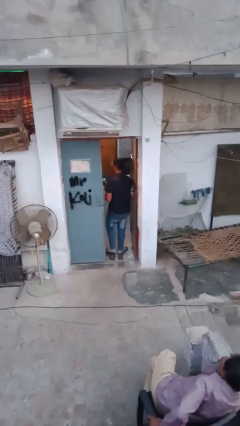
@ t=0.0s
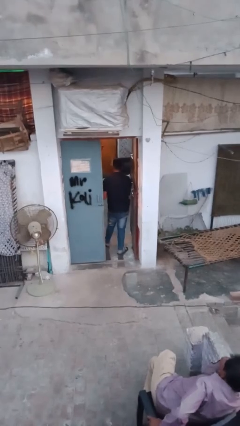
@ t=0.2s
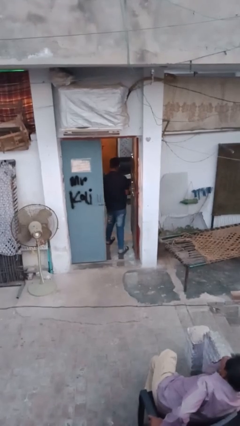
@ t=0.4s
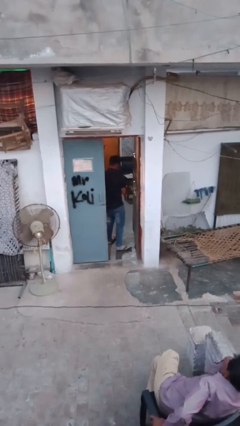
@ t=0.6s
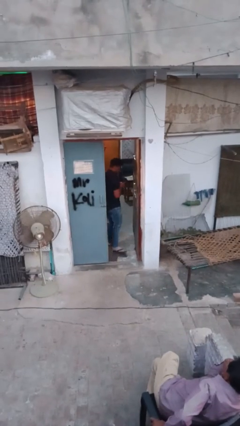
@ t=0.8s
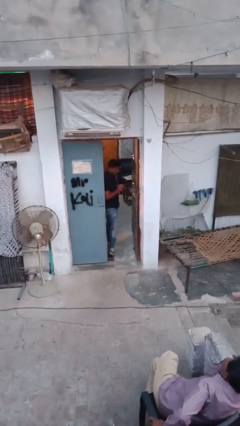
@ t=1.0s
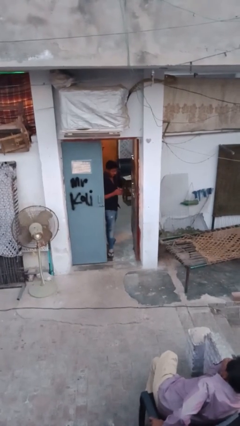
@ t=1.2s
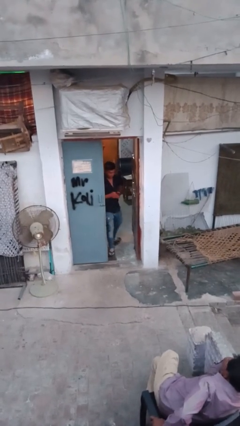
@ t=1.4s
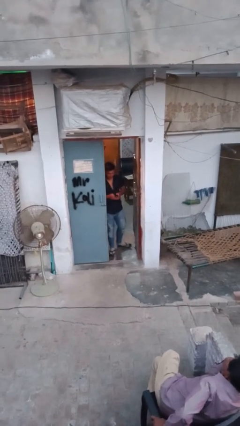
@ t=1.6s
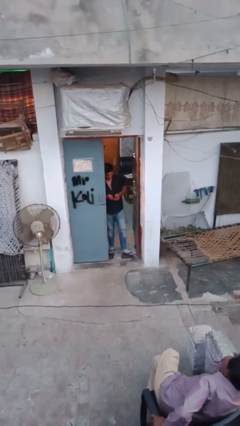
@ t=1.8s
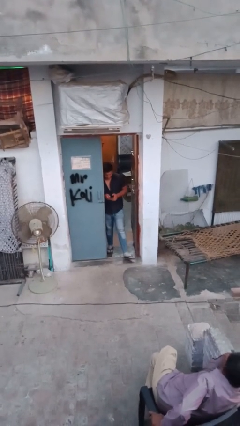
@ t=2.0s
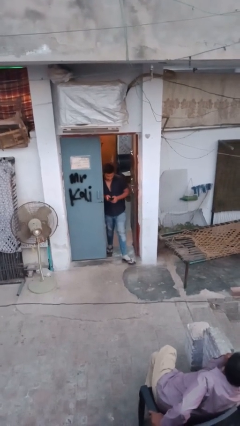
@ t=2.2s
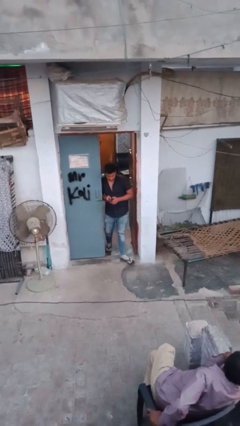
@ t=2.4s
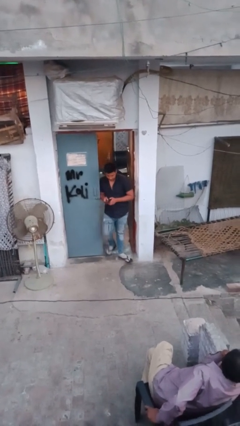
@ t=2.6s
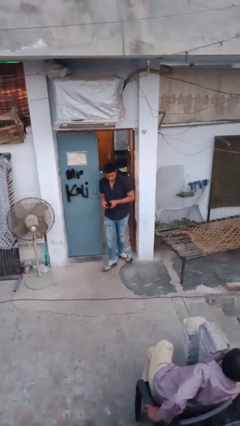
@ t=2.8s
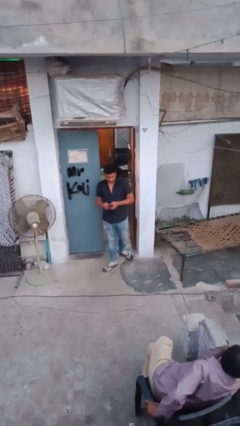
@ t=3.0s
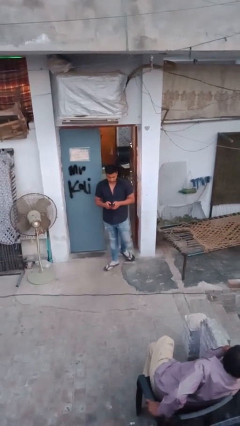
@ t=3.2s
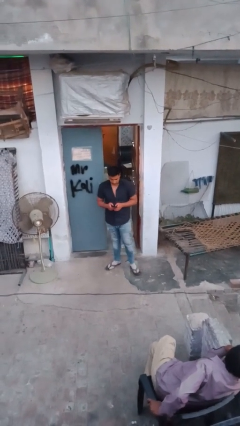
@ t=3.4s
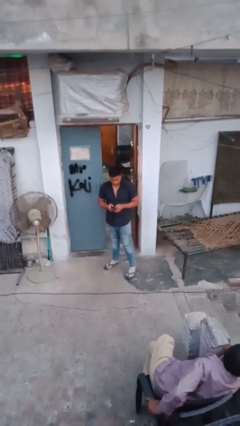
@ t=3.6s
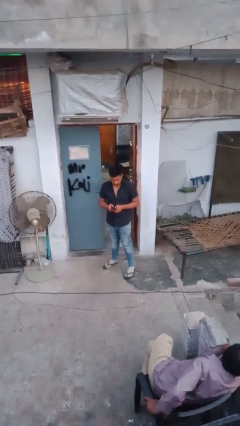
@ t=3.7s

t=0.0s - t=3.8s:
person enters scene through structure

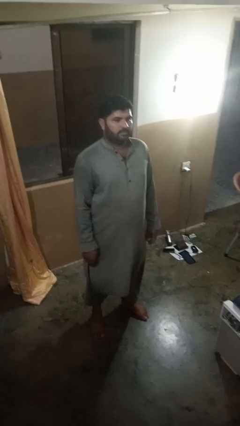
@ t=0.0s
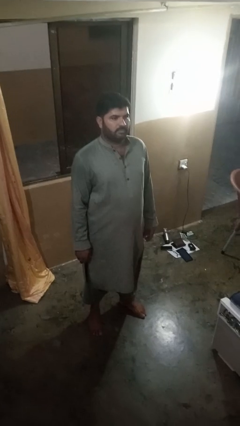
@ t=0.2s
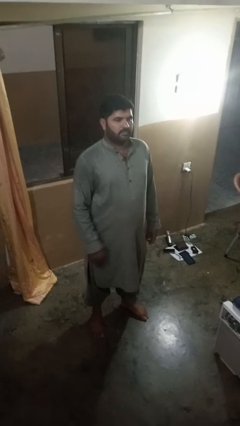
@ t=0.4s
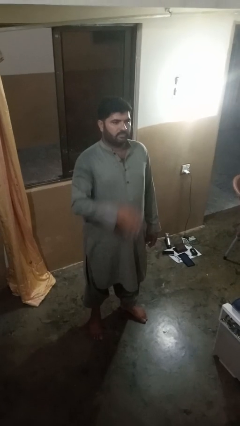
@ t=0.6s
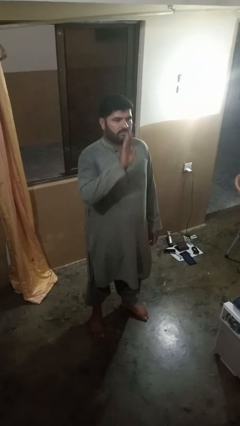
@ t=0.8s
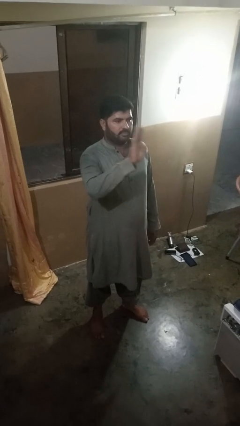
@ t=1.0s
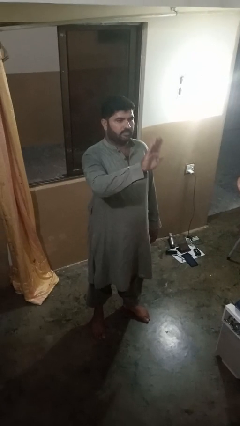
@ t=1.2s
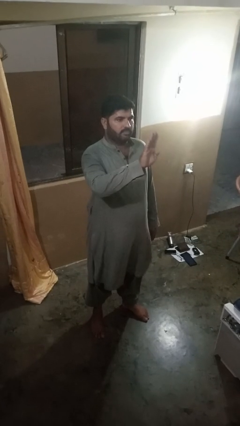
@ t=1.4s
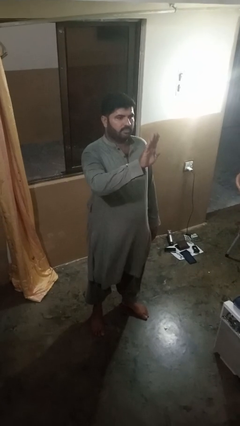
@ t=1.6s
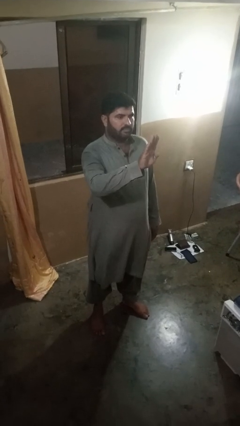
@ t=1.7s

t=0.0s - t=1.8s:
person gestures stop

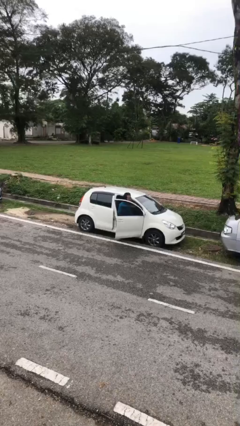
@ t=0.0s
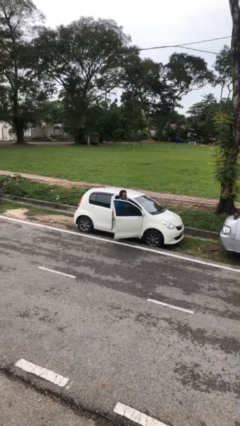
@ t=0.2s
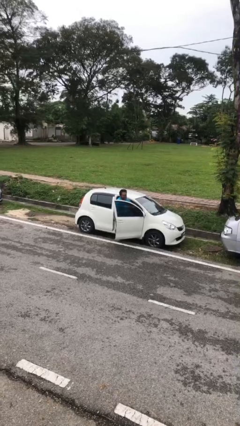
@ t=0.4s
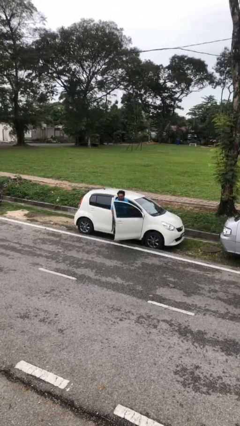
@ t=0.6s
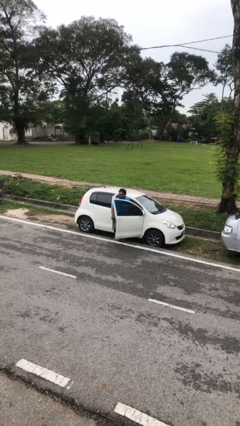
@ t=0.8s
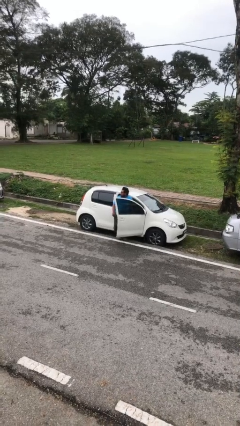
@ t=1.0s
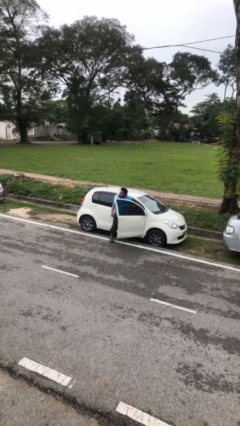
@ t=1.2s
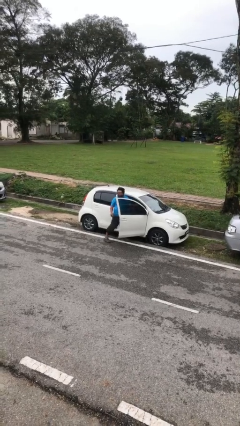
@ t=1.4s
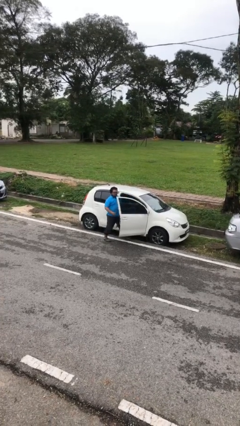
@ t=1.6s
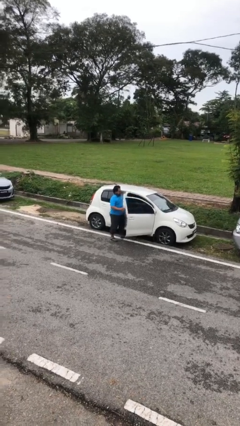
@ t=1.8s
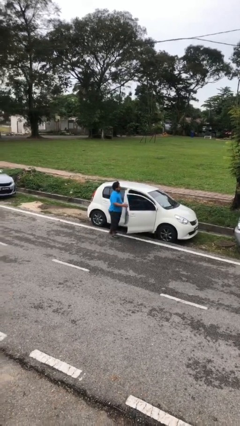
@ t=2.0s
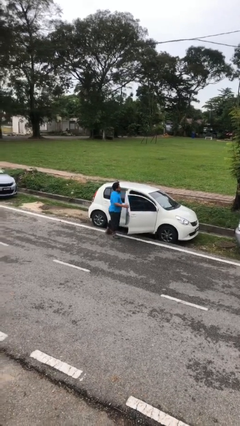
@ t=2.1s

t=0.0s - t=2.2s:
person exits car

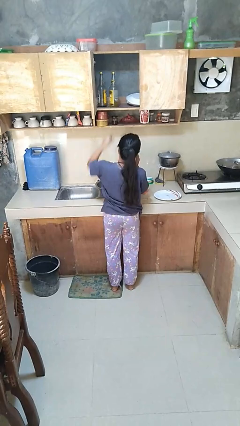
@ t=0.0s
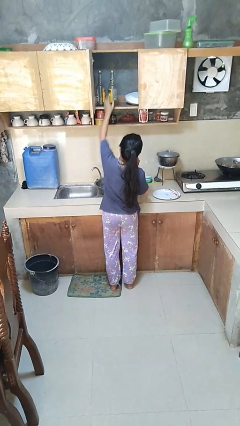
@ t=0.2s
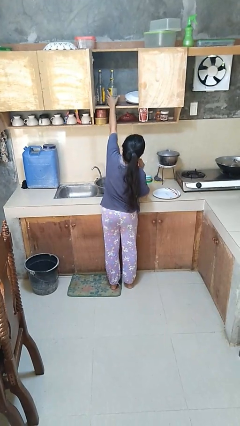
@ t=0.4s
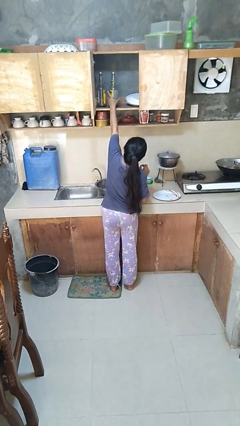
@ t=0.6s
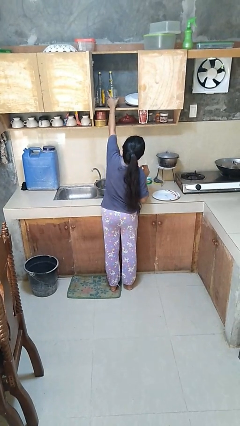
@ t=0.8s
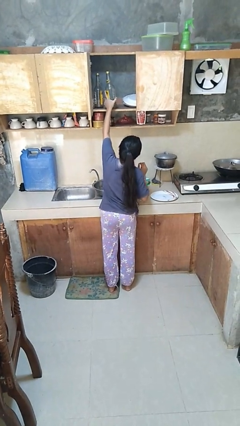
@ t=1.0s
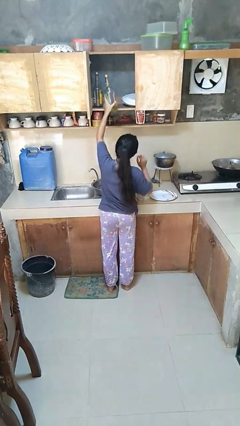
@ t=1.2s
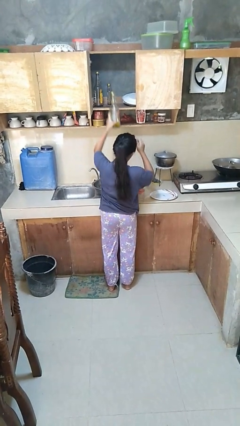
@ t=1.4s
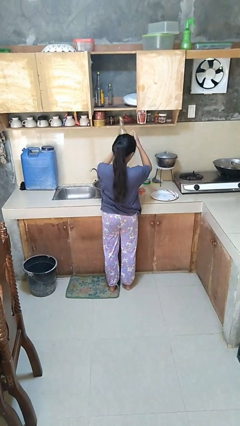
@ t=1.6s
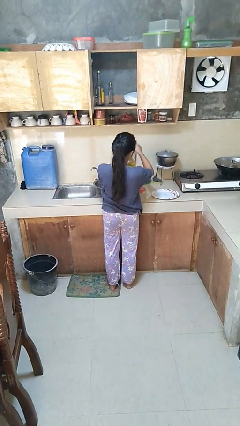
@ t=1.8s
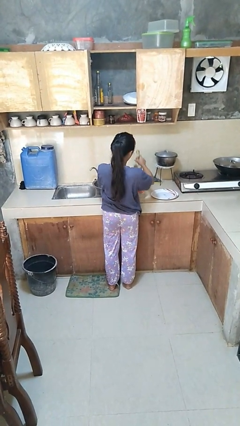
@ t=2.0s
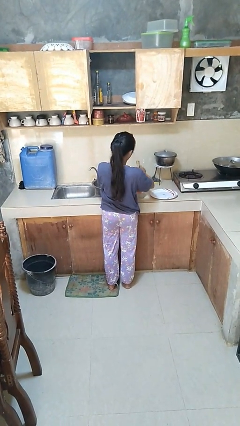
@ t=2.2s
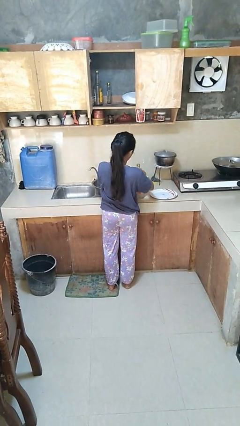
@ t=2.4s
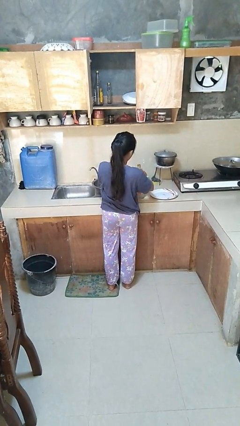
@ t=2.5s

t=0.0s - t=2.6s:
person takes object from cabinet

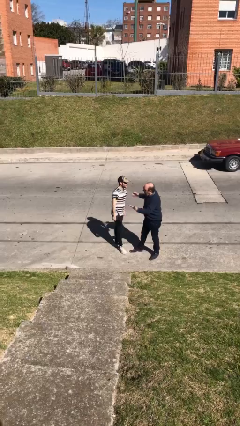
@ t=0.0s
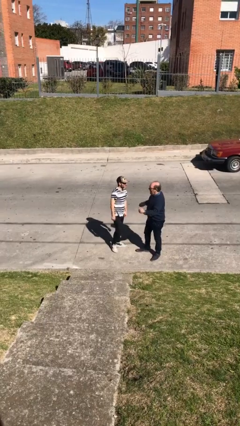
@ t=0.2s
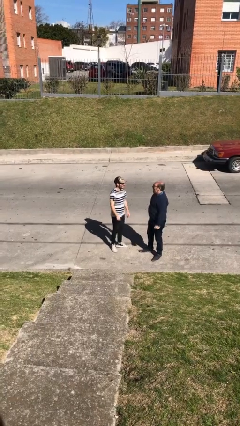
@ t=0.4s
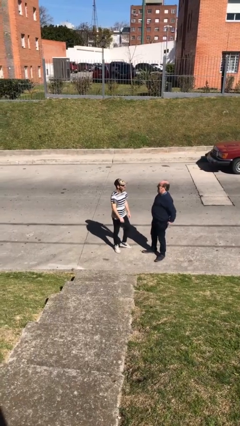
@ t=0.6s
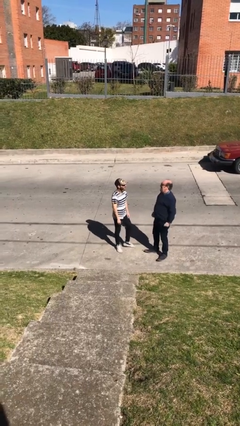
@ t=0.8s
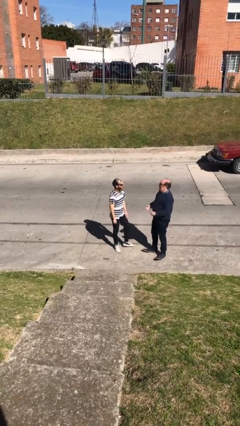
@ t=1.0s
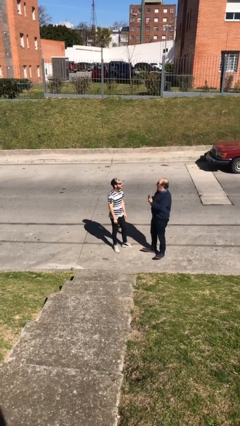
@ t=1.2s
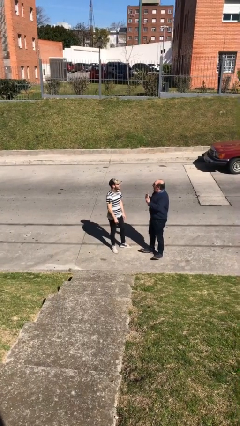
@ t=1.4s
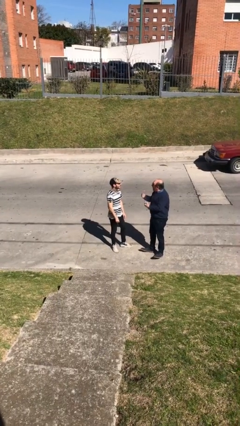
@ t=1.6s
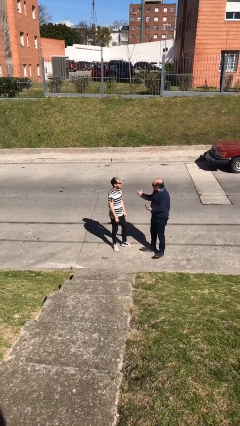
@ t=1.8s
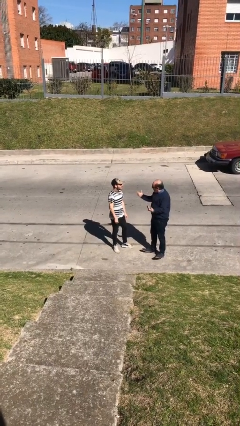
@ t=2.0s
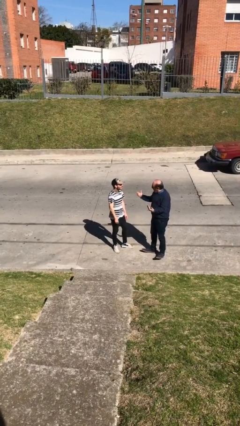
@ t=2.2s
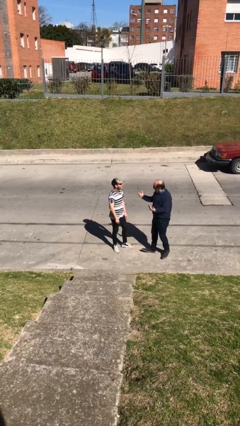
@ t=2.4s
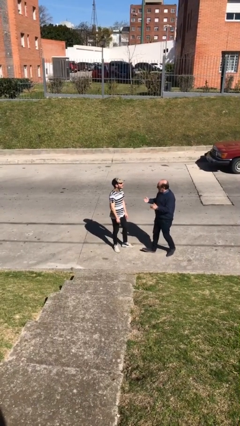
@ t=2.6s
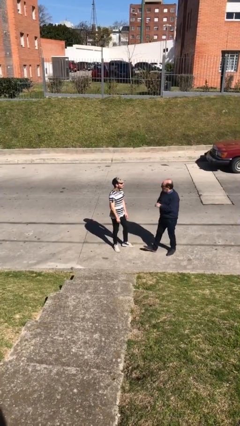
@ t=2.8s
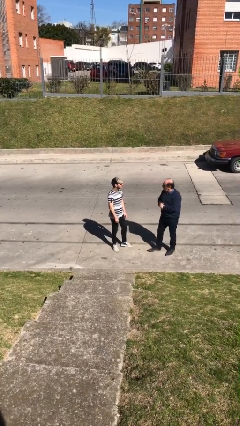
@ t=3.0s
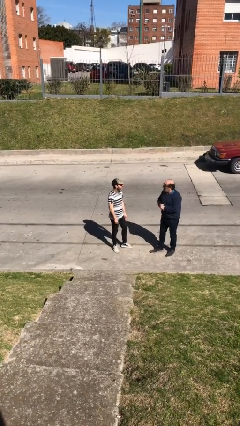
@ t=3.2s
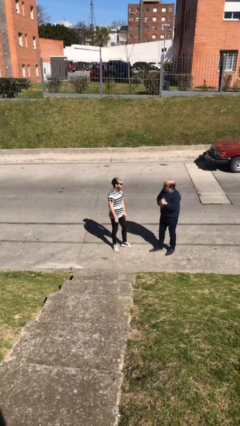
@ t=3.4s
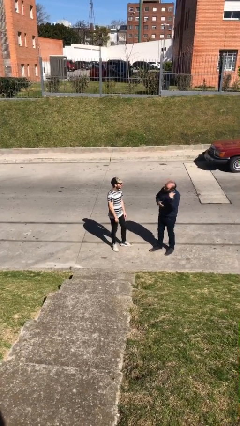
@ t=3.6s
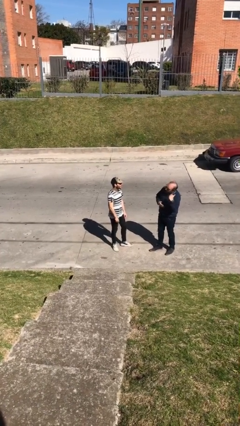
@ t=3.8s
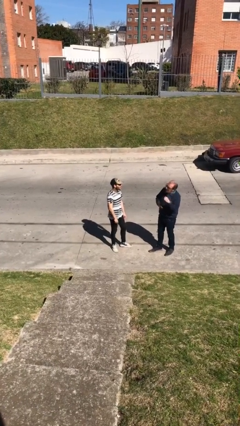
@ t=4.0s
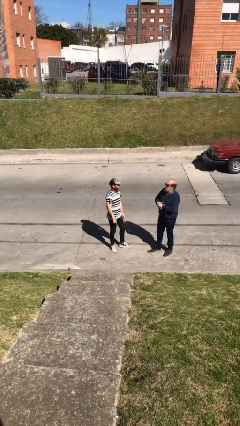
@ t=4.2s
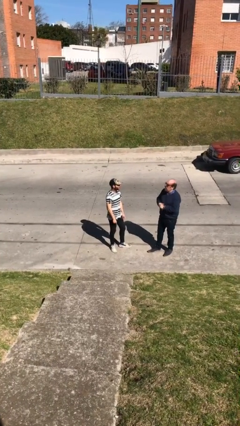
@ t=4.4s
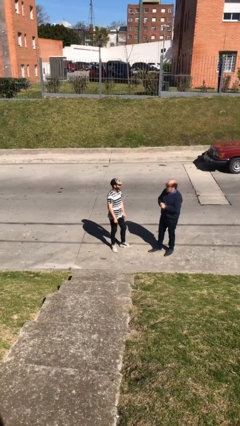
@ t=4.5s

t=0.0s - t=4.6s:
person talks to person

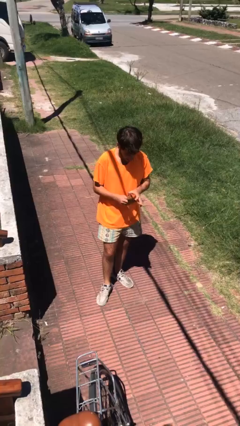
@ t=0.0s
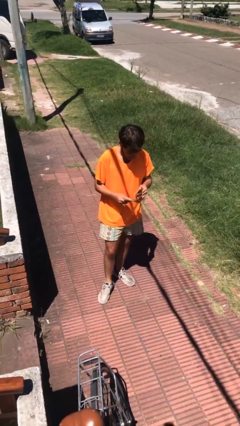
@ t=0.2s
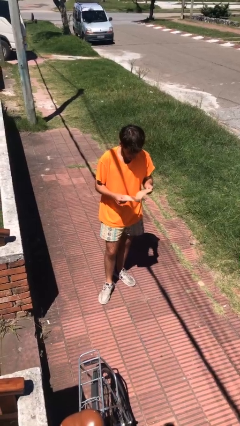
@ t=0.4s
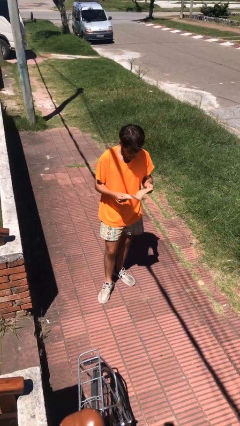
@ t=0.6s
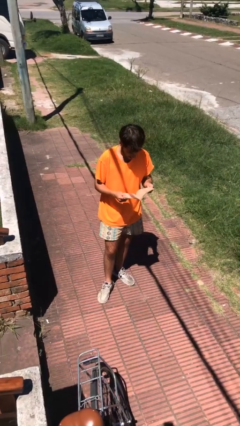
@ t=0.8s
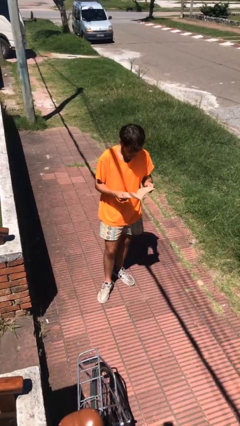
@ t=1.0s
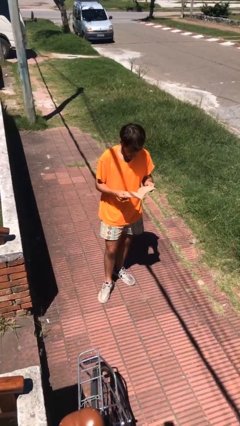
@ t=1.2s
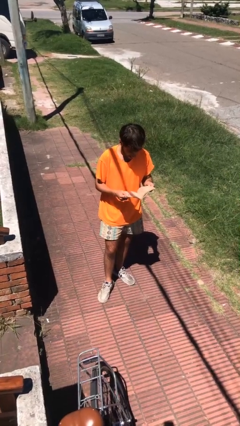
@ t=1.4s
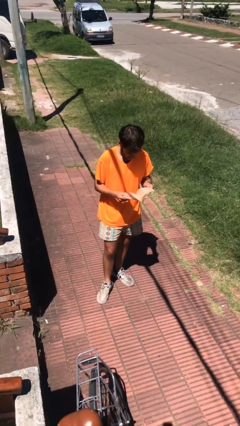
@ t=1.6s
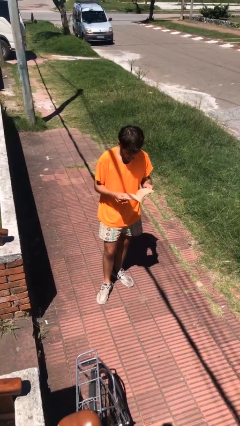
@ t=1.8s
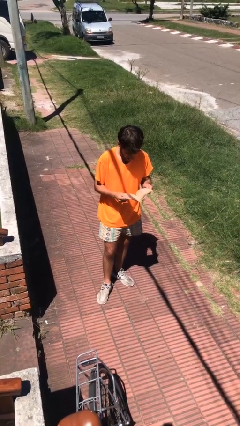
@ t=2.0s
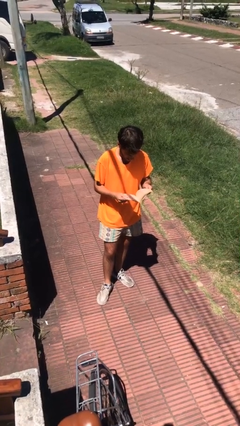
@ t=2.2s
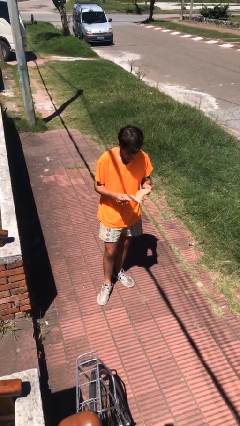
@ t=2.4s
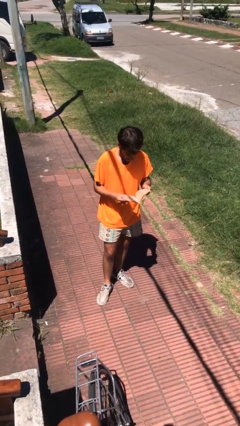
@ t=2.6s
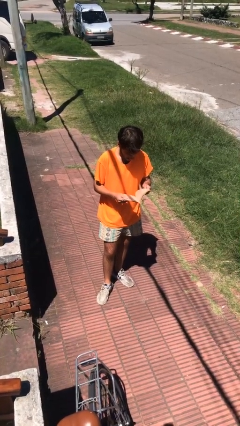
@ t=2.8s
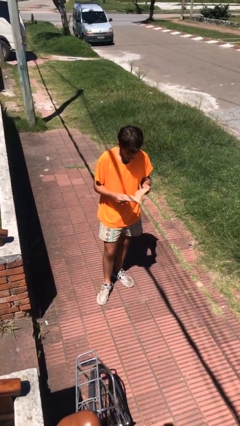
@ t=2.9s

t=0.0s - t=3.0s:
person reads document
